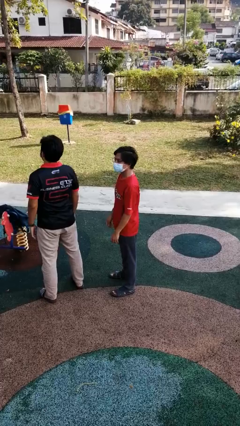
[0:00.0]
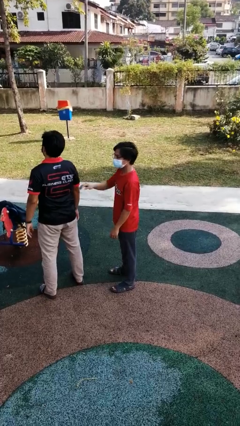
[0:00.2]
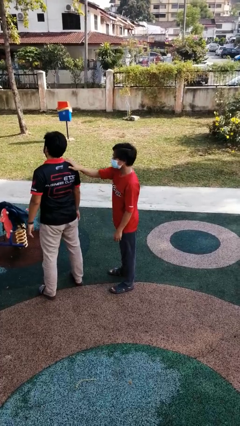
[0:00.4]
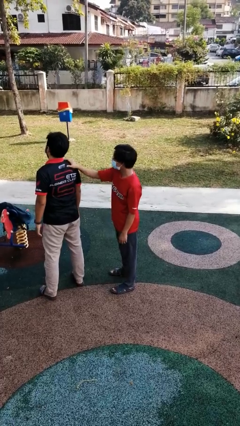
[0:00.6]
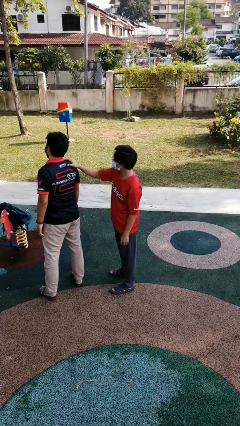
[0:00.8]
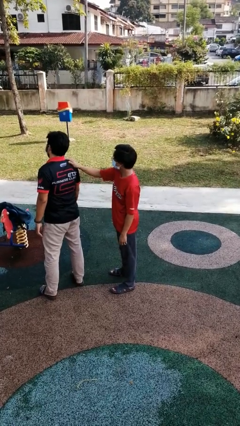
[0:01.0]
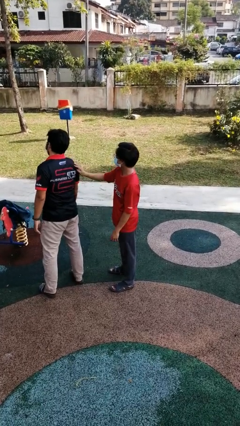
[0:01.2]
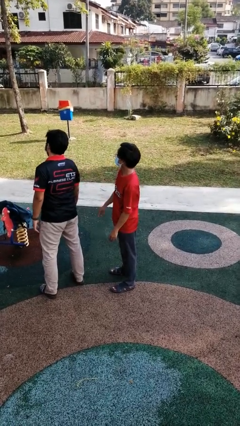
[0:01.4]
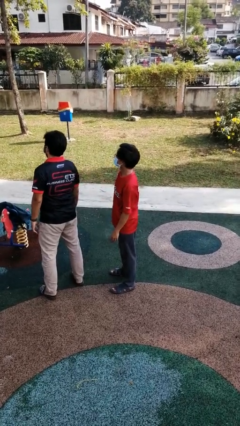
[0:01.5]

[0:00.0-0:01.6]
person touches back of person

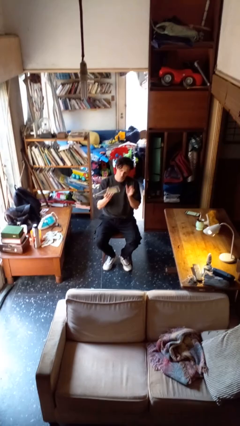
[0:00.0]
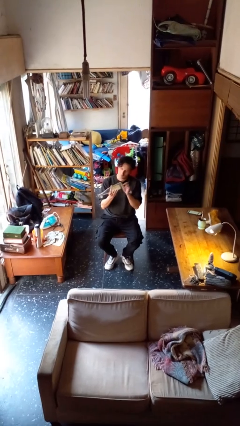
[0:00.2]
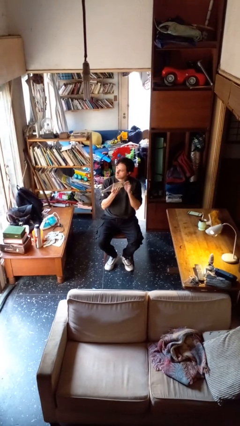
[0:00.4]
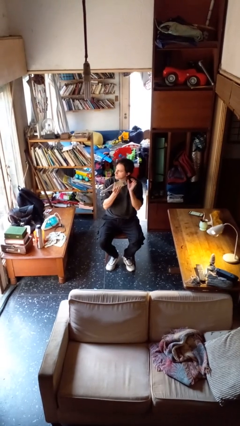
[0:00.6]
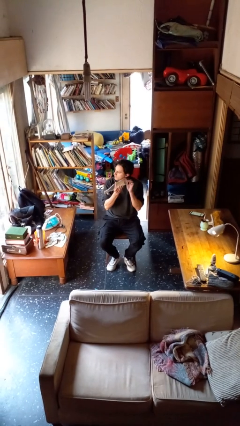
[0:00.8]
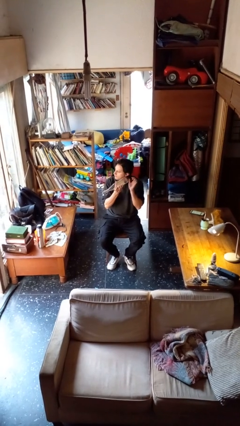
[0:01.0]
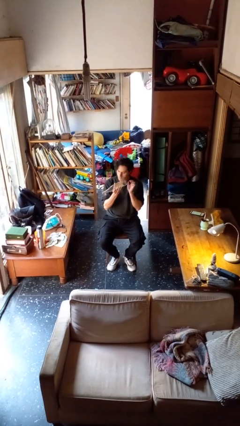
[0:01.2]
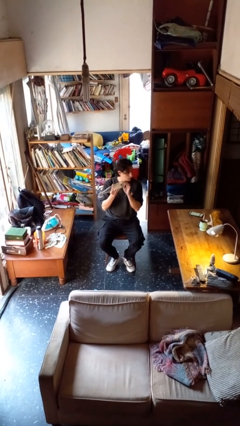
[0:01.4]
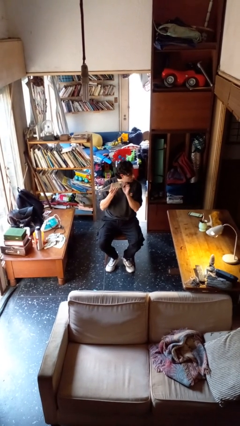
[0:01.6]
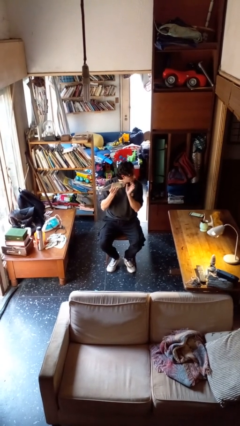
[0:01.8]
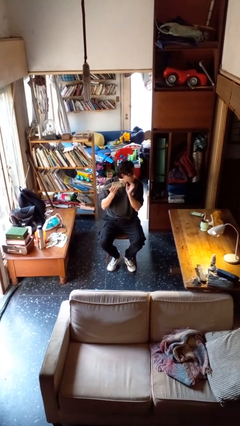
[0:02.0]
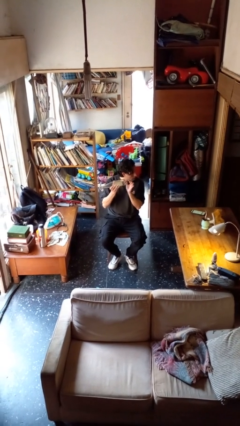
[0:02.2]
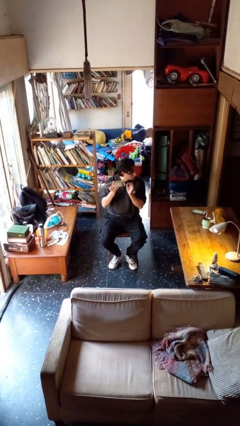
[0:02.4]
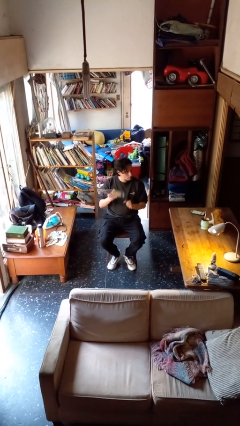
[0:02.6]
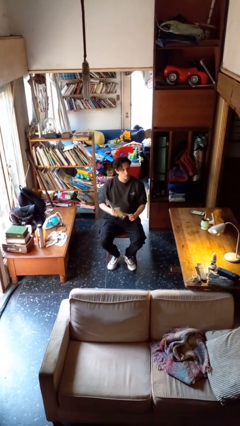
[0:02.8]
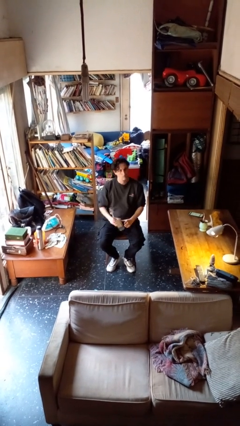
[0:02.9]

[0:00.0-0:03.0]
person taps object with finger

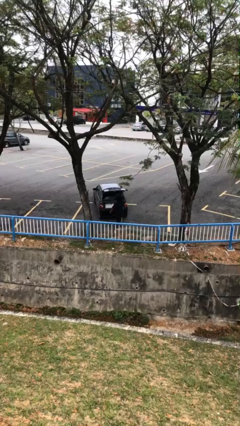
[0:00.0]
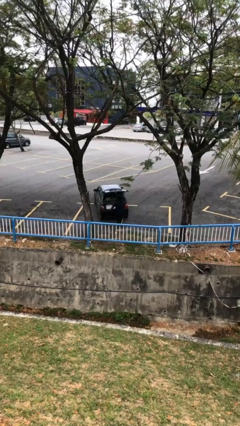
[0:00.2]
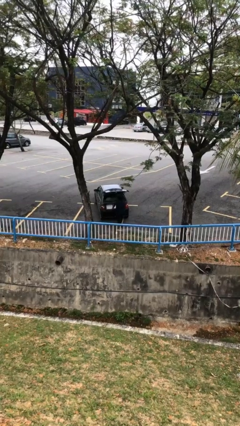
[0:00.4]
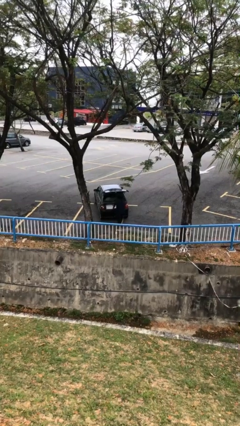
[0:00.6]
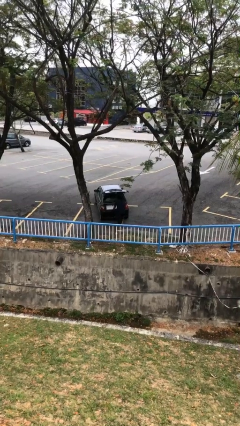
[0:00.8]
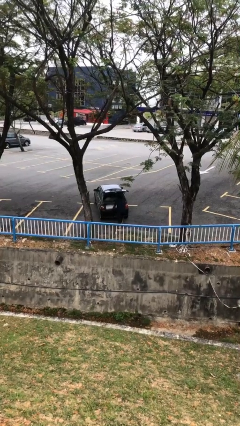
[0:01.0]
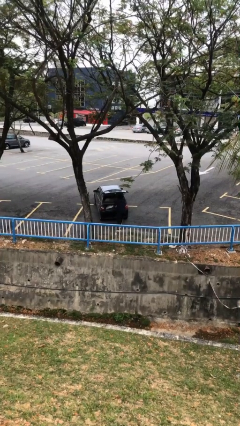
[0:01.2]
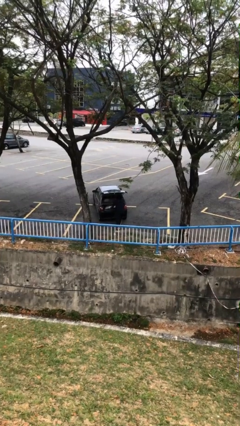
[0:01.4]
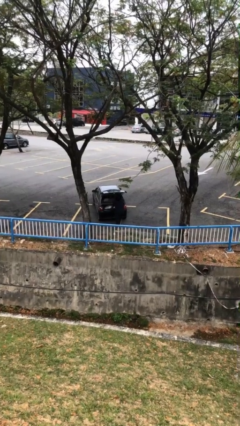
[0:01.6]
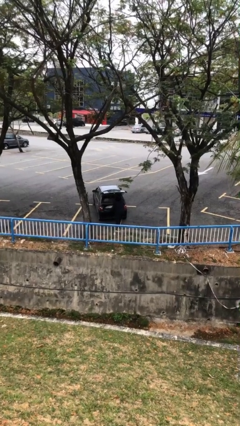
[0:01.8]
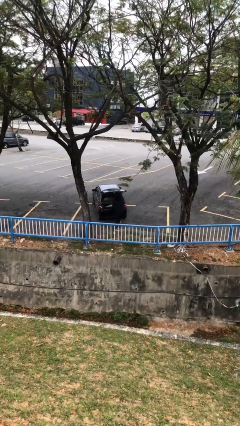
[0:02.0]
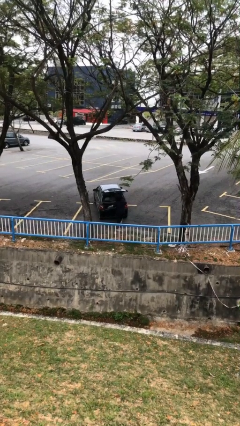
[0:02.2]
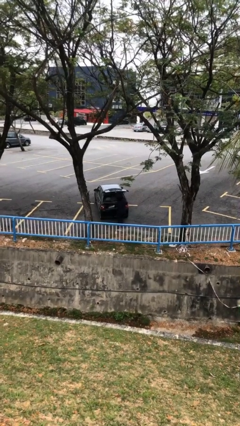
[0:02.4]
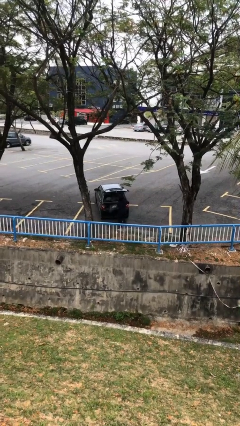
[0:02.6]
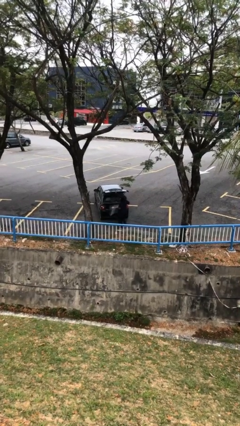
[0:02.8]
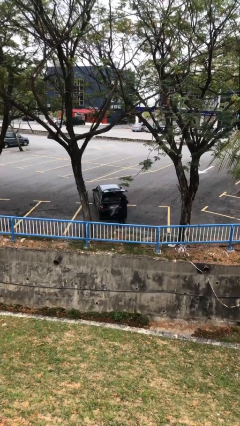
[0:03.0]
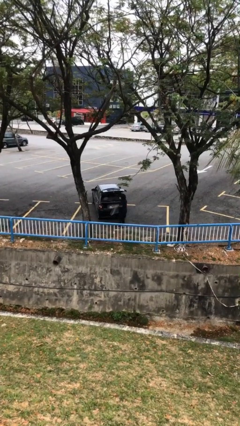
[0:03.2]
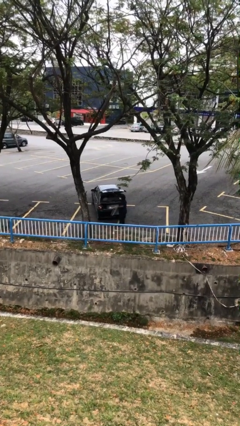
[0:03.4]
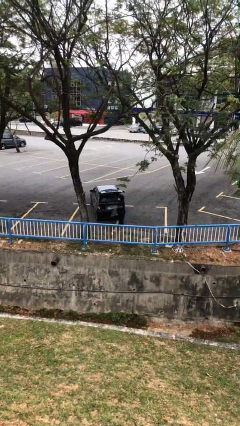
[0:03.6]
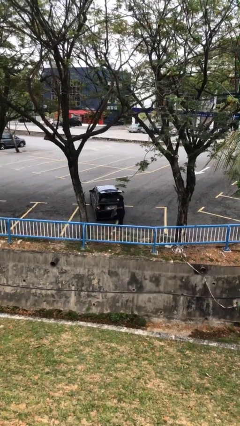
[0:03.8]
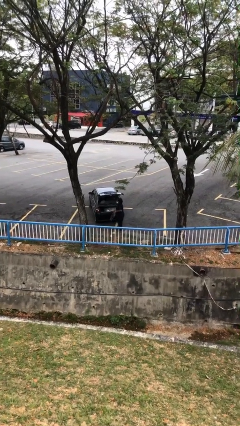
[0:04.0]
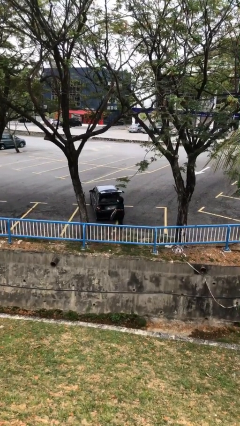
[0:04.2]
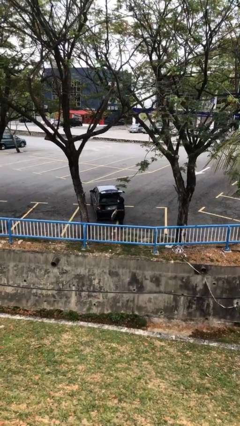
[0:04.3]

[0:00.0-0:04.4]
person unloads car

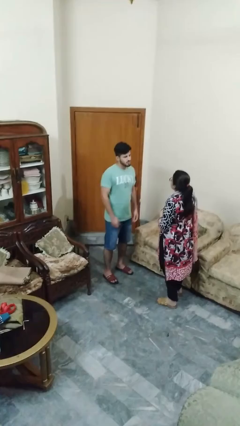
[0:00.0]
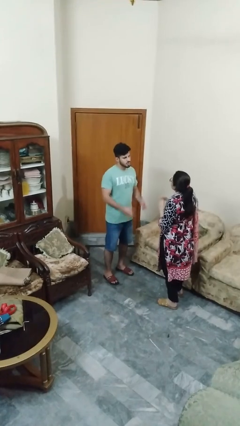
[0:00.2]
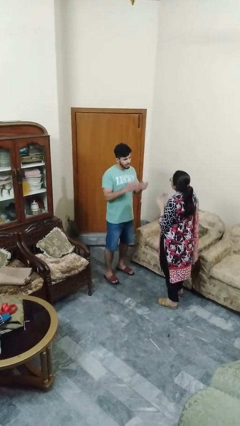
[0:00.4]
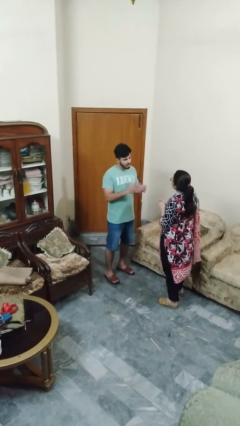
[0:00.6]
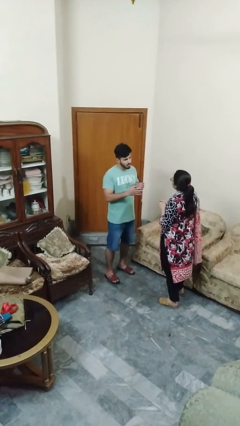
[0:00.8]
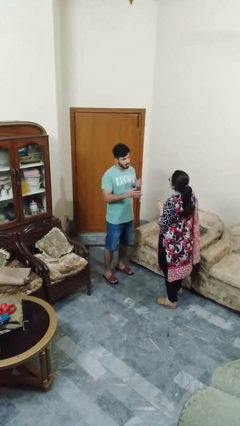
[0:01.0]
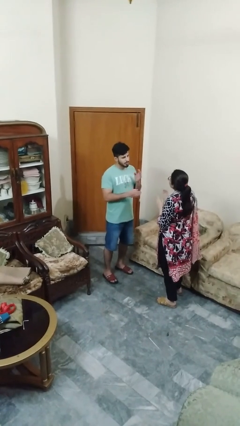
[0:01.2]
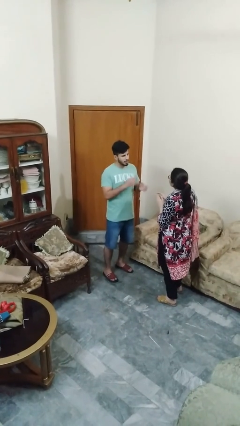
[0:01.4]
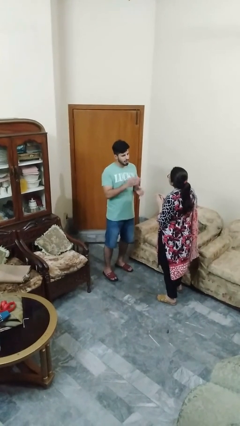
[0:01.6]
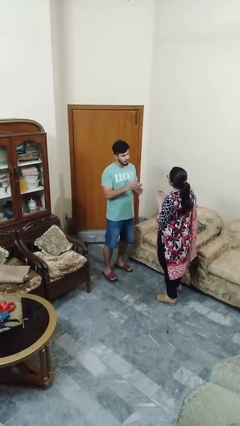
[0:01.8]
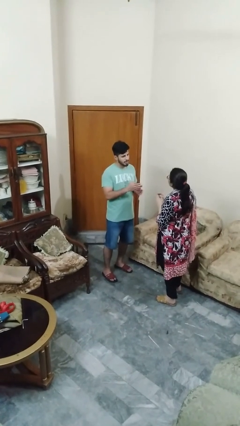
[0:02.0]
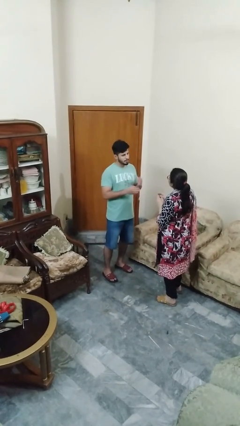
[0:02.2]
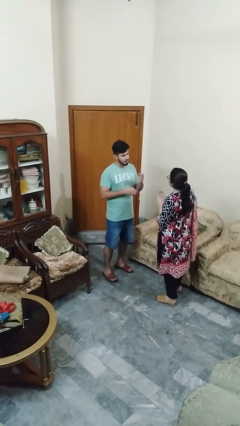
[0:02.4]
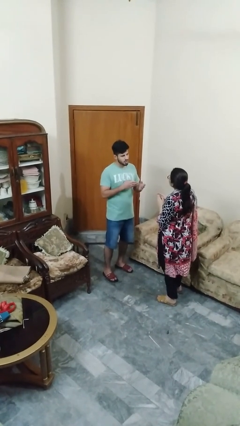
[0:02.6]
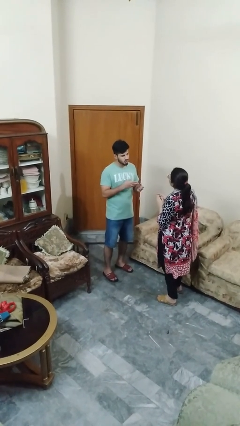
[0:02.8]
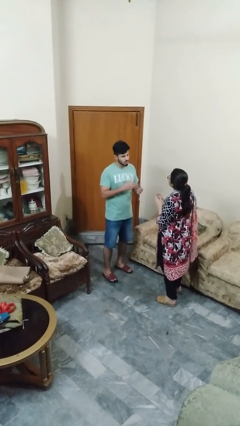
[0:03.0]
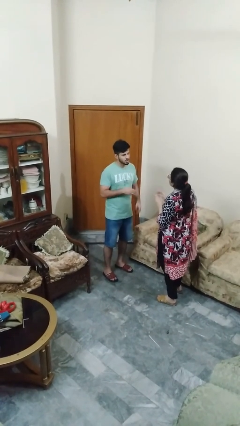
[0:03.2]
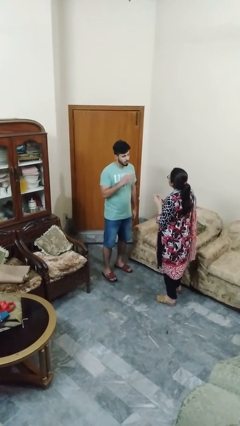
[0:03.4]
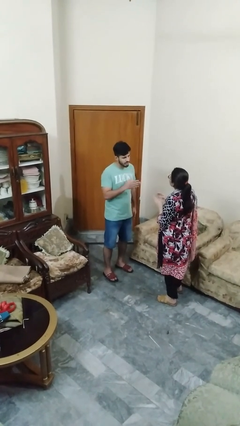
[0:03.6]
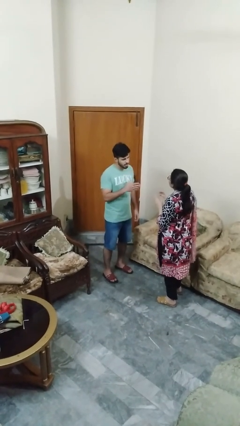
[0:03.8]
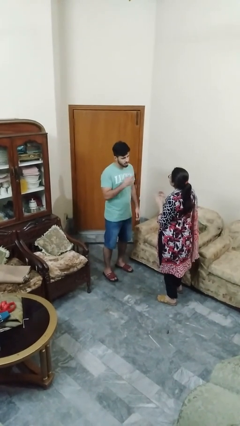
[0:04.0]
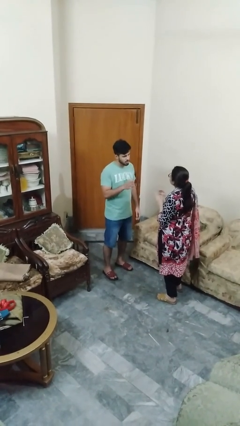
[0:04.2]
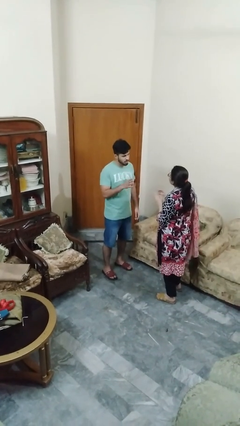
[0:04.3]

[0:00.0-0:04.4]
person talks to person

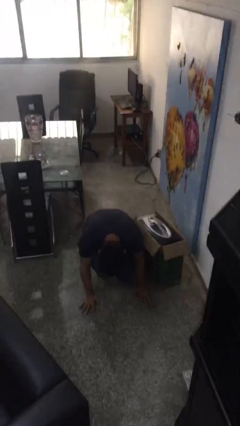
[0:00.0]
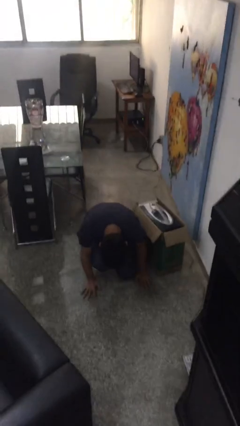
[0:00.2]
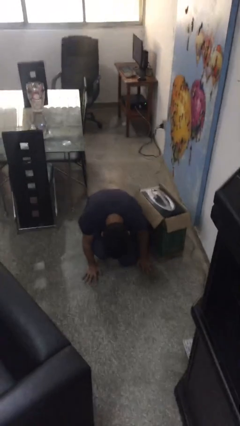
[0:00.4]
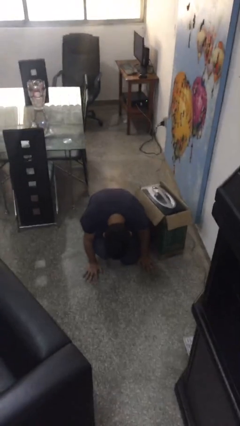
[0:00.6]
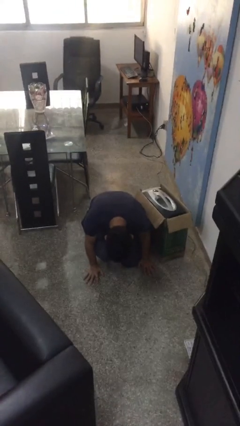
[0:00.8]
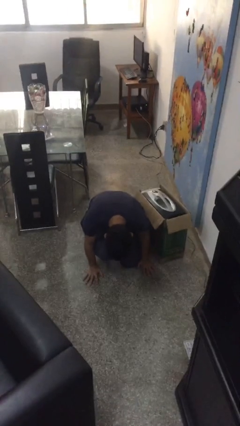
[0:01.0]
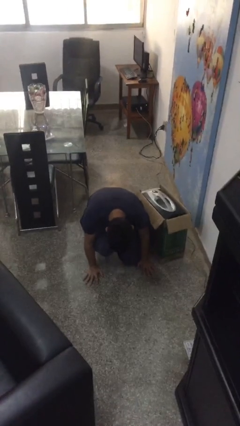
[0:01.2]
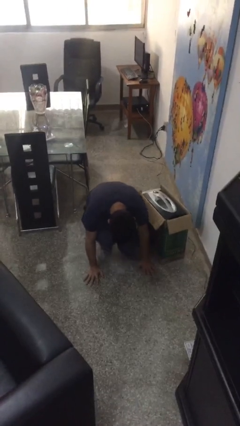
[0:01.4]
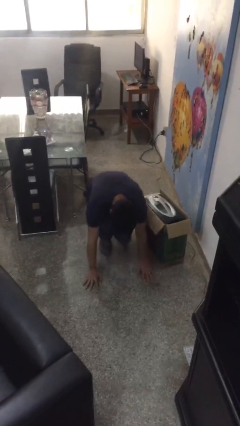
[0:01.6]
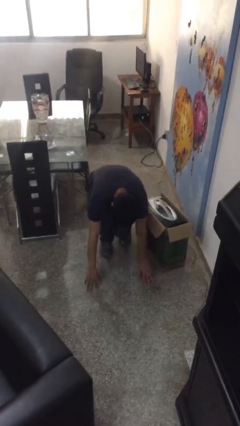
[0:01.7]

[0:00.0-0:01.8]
person lies down on floor

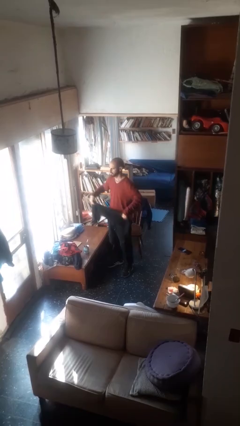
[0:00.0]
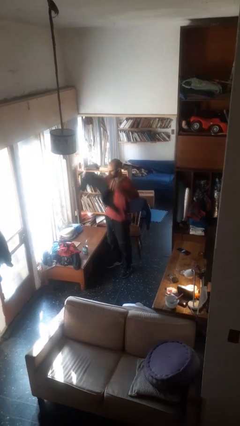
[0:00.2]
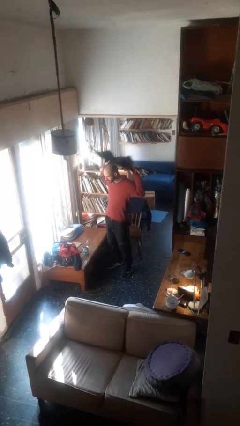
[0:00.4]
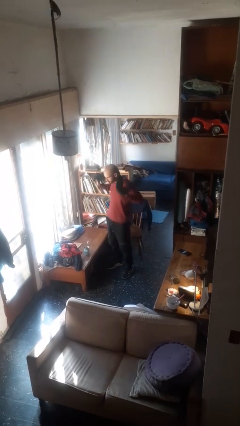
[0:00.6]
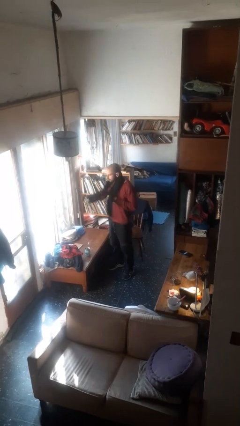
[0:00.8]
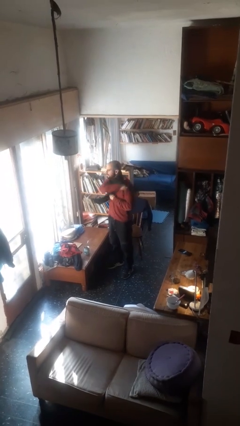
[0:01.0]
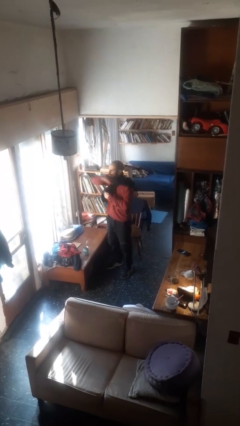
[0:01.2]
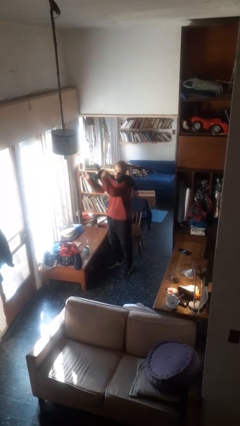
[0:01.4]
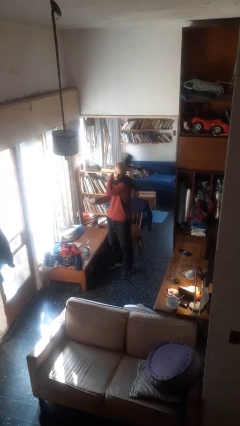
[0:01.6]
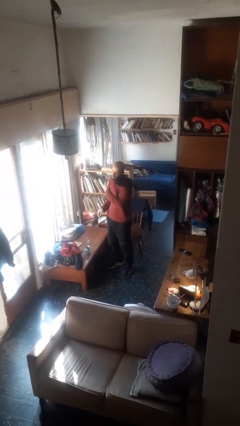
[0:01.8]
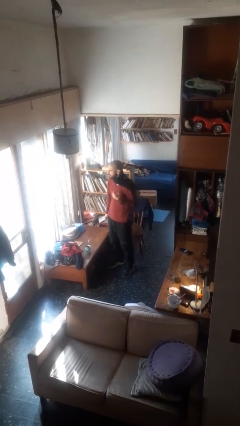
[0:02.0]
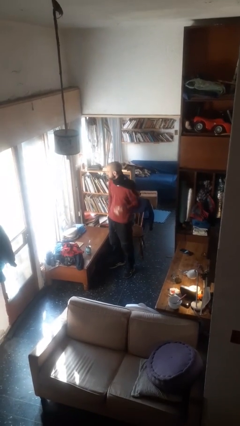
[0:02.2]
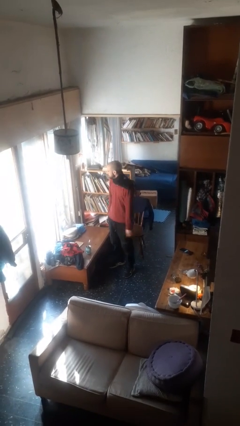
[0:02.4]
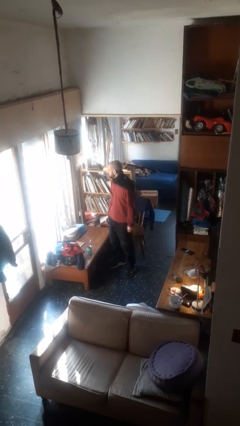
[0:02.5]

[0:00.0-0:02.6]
person puts on scarf
